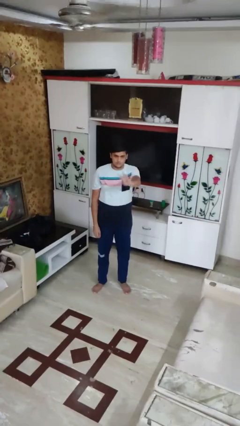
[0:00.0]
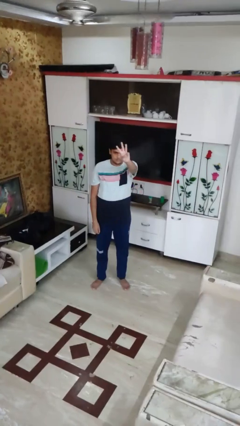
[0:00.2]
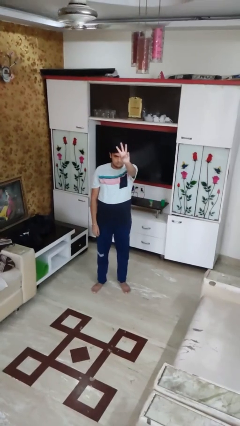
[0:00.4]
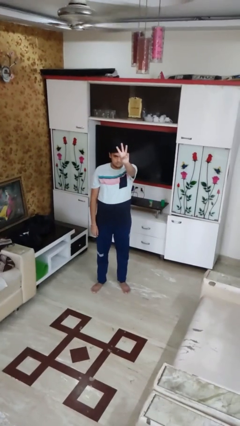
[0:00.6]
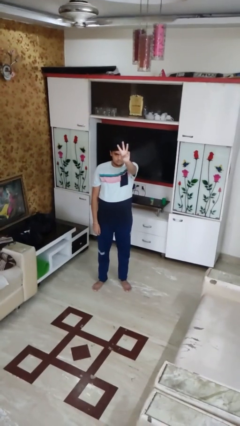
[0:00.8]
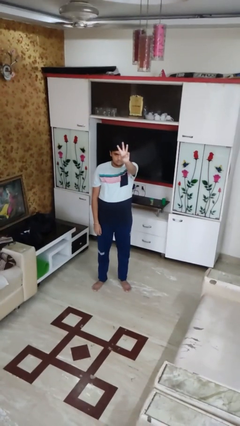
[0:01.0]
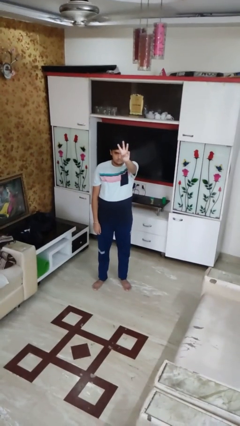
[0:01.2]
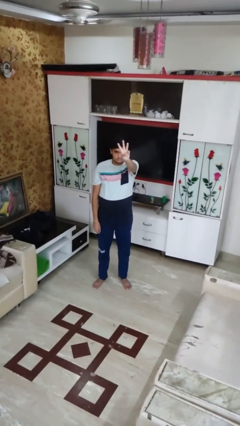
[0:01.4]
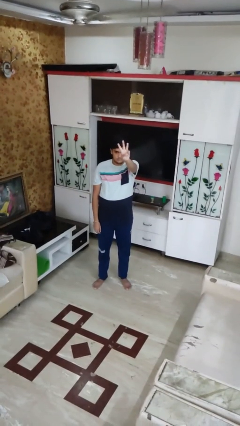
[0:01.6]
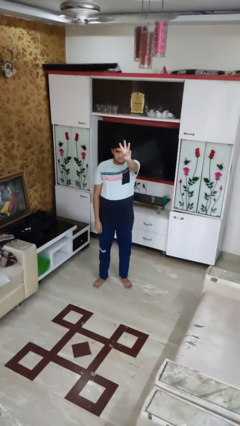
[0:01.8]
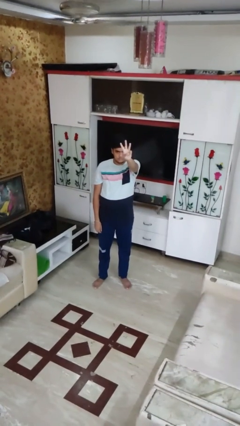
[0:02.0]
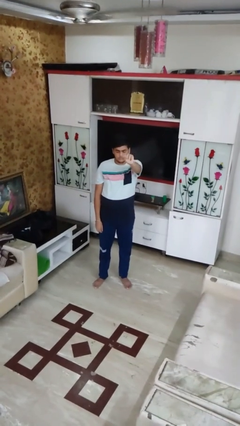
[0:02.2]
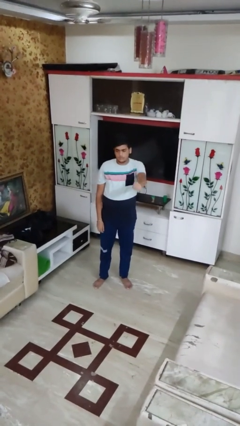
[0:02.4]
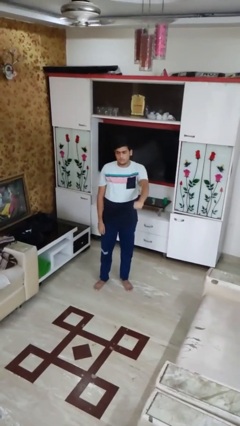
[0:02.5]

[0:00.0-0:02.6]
person gestures number three

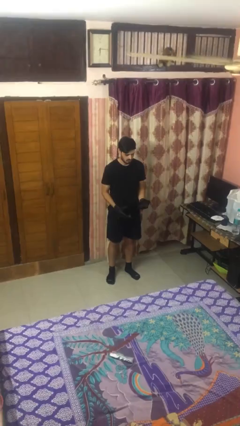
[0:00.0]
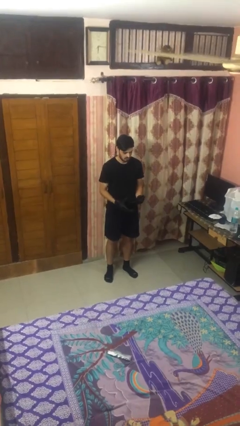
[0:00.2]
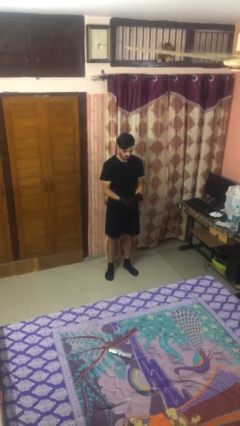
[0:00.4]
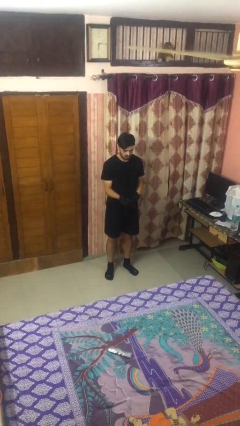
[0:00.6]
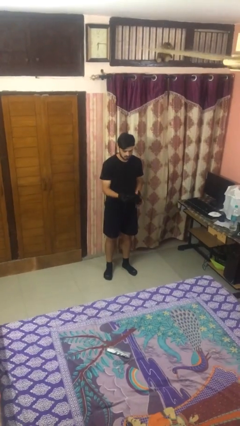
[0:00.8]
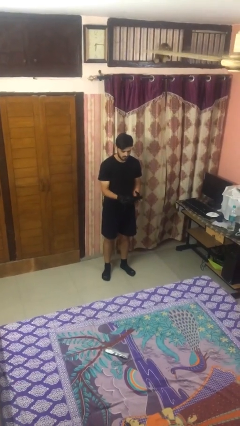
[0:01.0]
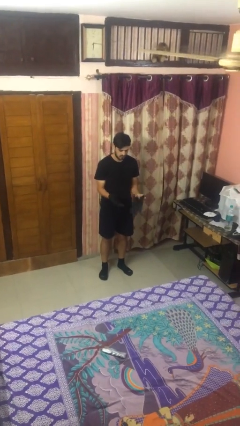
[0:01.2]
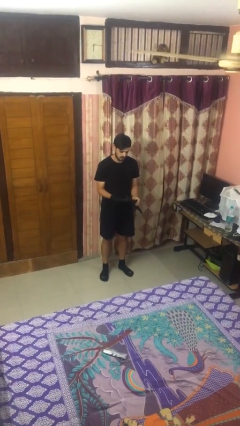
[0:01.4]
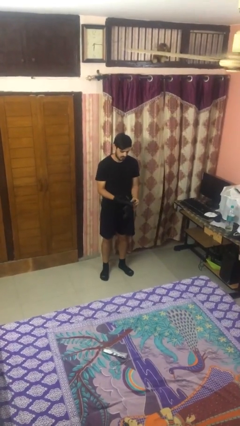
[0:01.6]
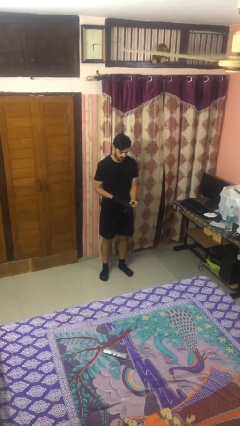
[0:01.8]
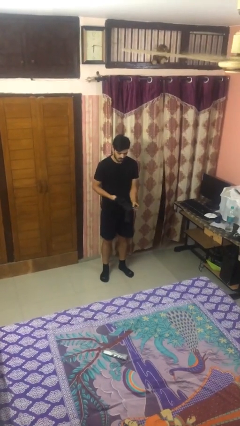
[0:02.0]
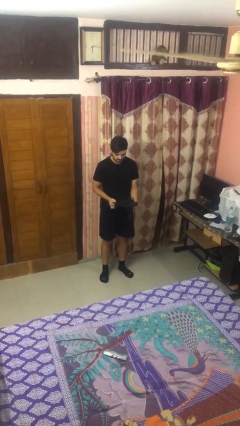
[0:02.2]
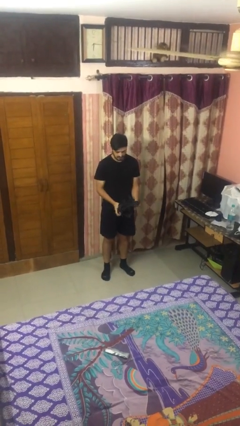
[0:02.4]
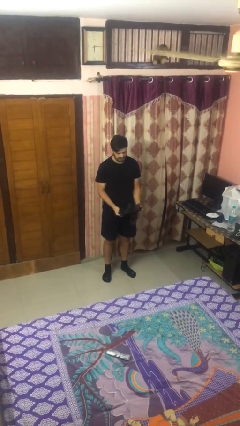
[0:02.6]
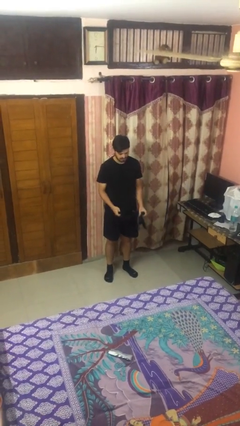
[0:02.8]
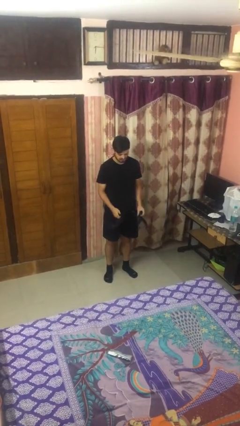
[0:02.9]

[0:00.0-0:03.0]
person takes off gloves

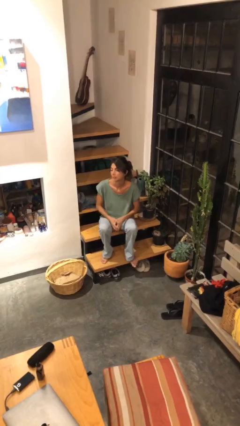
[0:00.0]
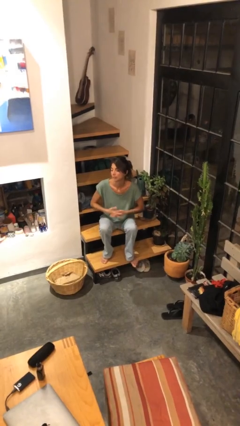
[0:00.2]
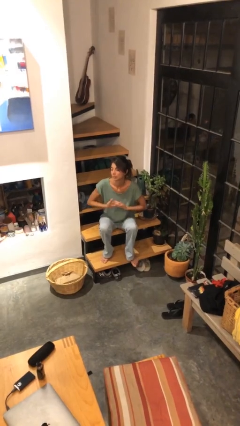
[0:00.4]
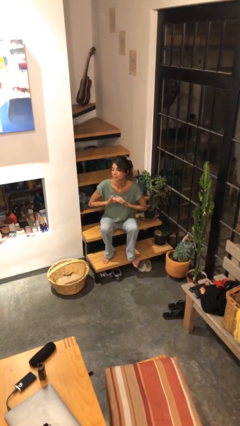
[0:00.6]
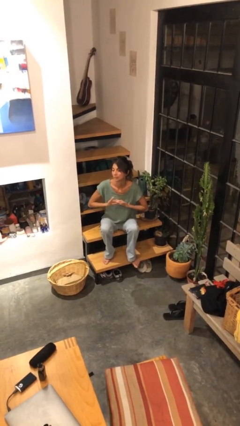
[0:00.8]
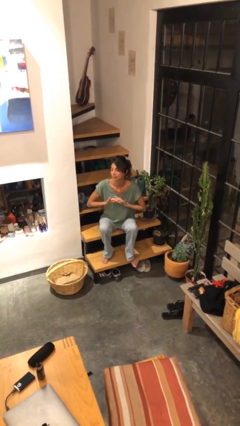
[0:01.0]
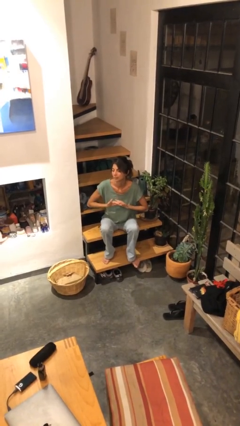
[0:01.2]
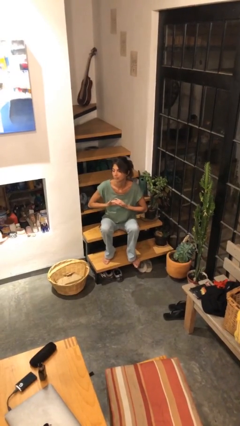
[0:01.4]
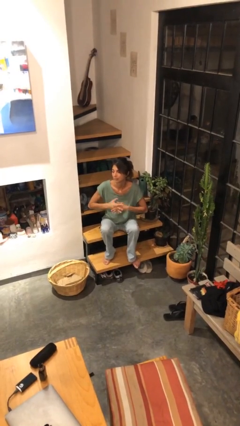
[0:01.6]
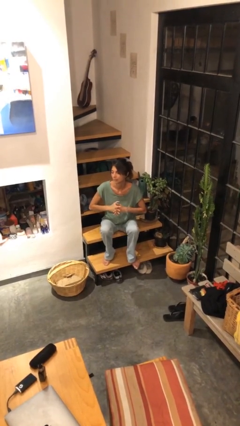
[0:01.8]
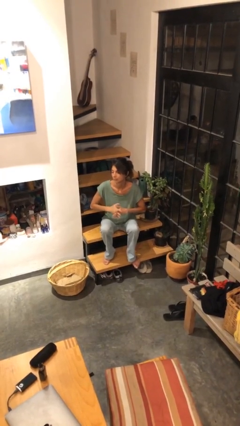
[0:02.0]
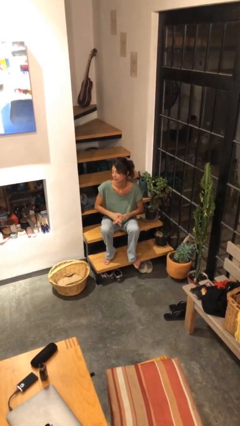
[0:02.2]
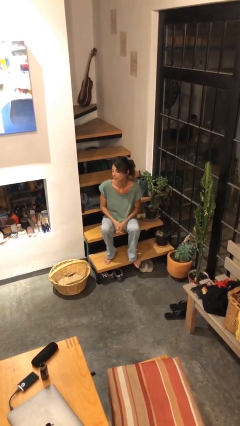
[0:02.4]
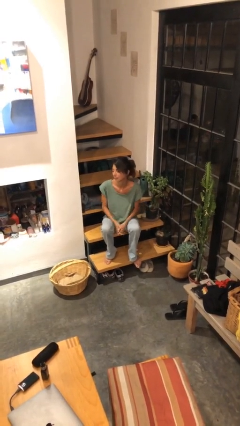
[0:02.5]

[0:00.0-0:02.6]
person cracks knuckles

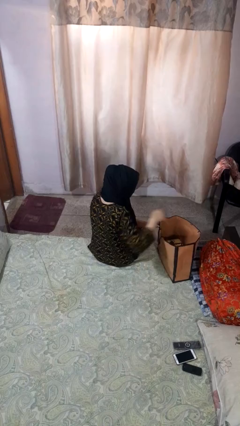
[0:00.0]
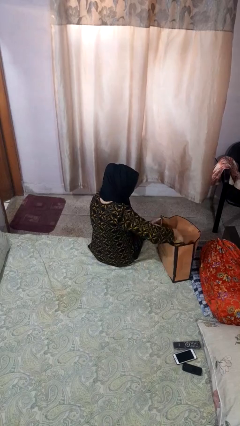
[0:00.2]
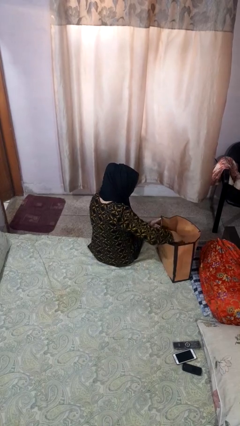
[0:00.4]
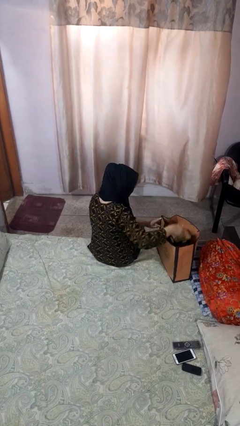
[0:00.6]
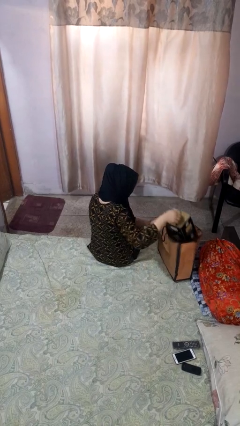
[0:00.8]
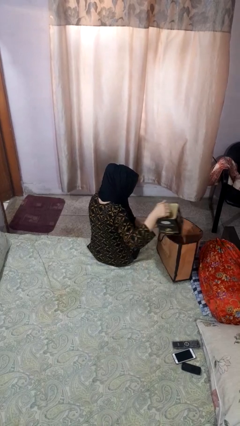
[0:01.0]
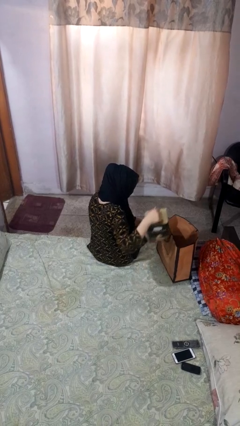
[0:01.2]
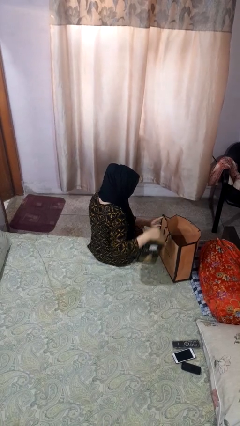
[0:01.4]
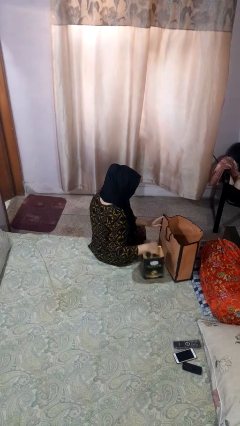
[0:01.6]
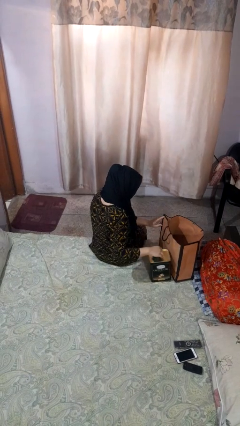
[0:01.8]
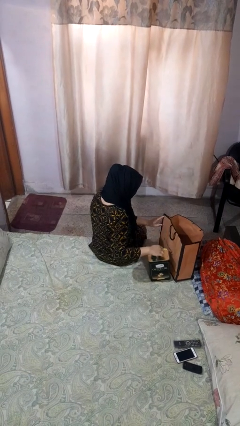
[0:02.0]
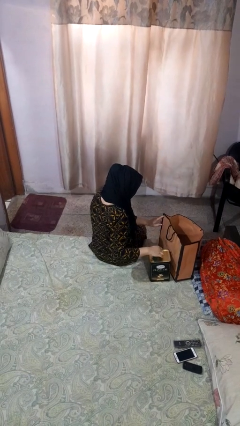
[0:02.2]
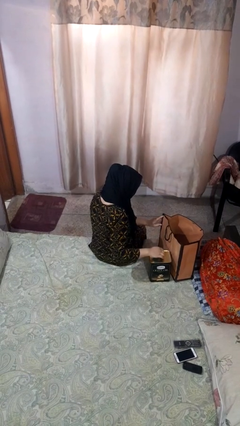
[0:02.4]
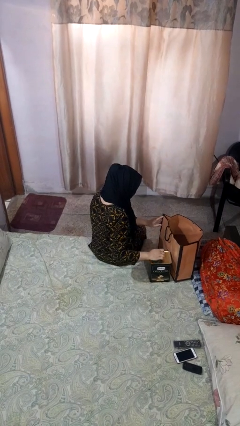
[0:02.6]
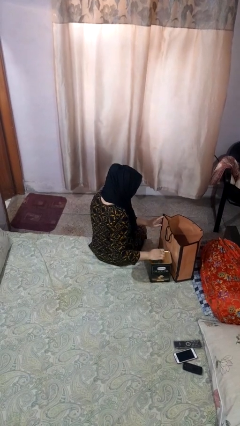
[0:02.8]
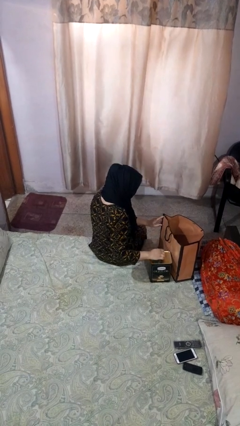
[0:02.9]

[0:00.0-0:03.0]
person takes object from bag

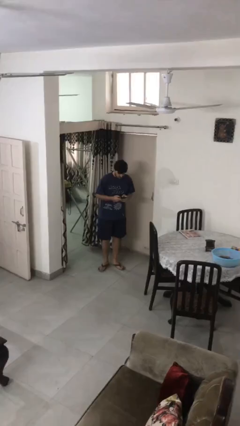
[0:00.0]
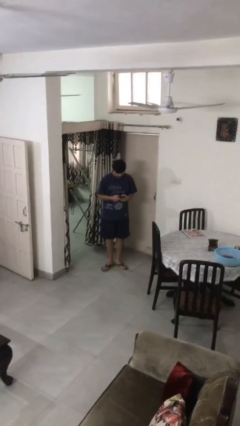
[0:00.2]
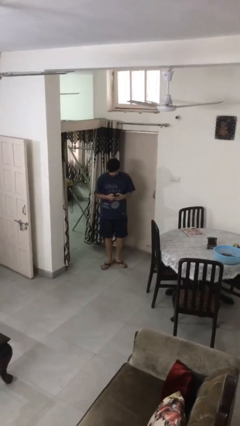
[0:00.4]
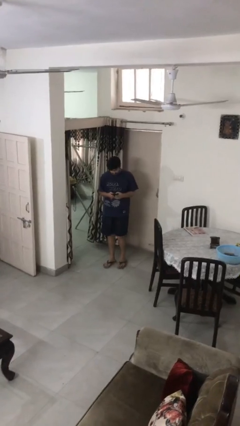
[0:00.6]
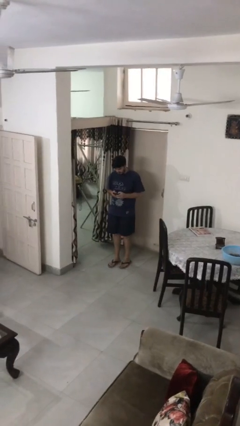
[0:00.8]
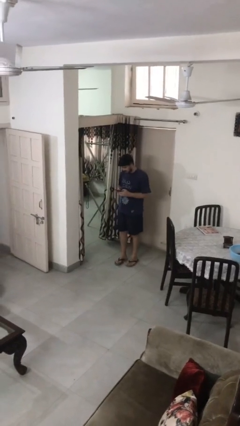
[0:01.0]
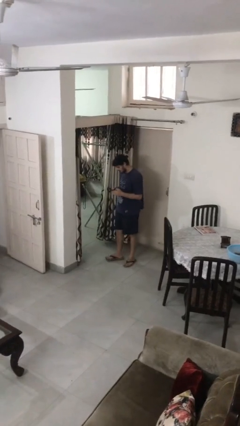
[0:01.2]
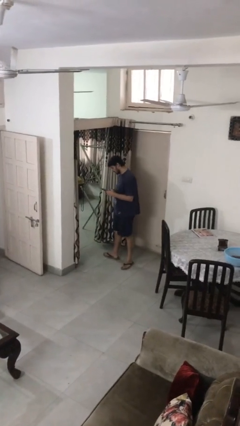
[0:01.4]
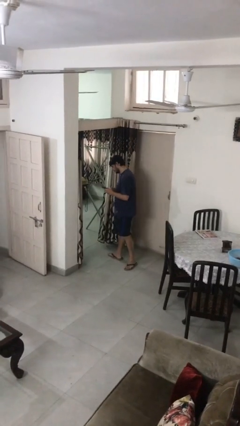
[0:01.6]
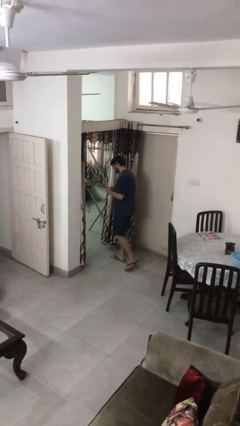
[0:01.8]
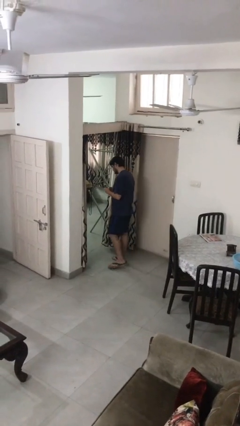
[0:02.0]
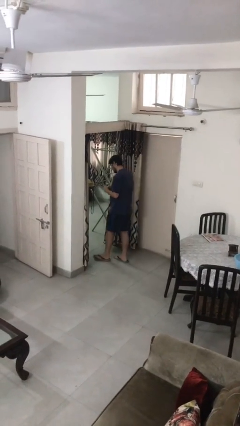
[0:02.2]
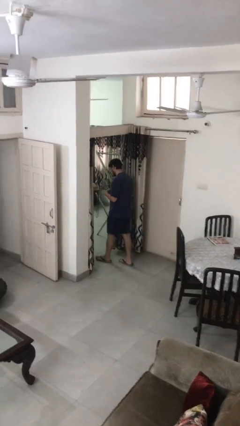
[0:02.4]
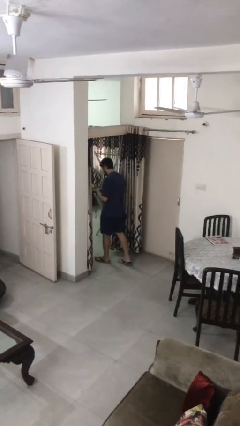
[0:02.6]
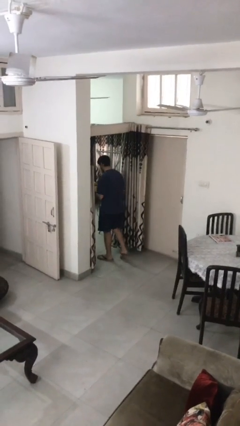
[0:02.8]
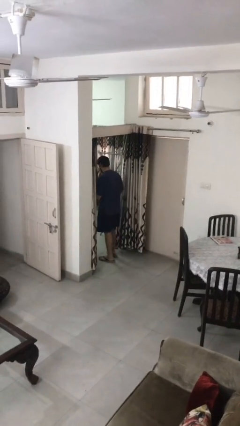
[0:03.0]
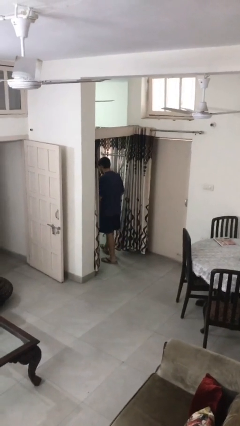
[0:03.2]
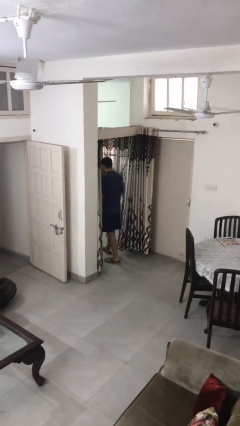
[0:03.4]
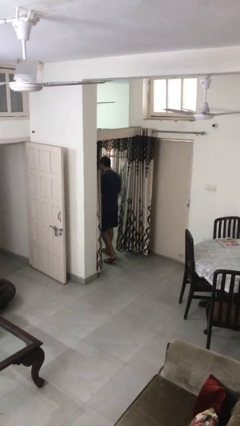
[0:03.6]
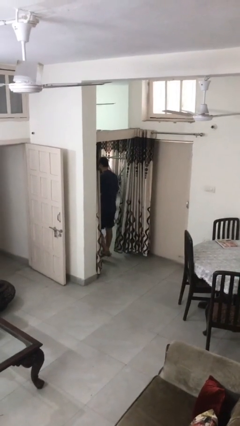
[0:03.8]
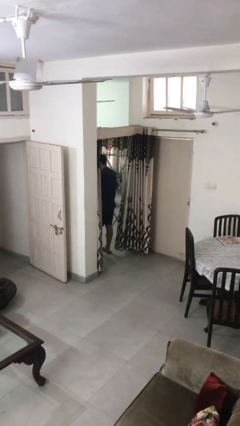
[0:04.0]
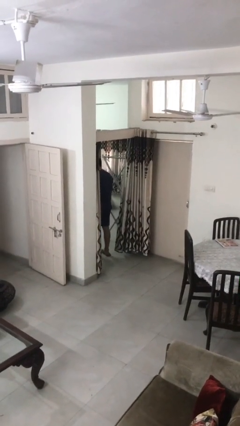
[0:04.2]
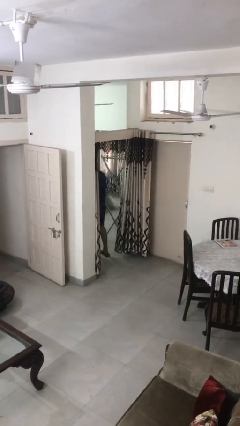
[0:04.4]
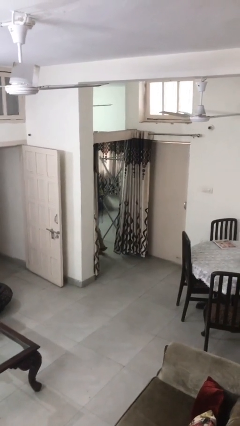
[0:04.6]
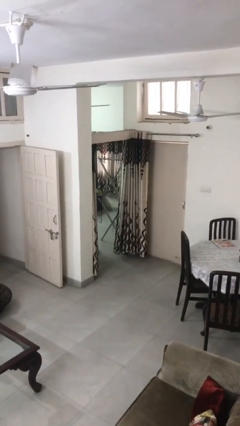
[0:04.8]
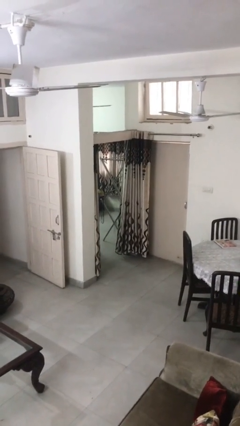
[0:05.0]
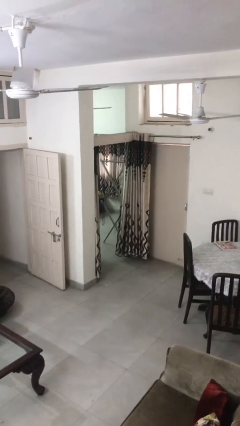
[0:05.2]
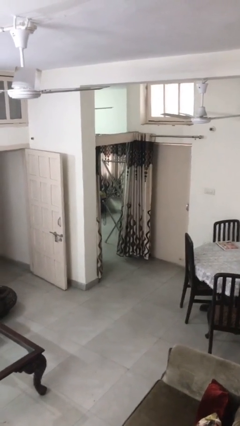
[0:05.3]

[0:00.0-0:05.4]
person exits scene through structure

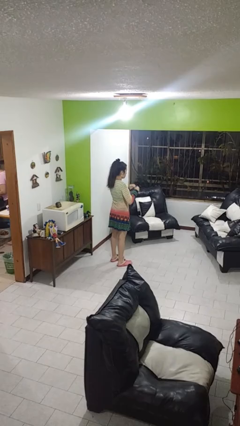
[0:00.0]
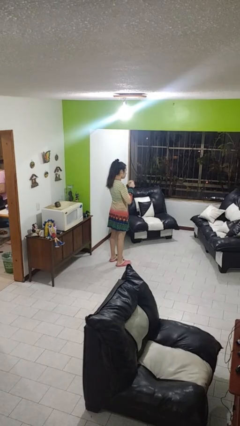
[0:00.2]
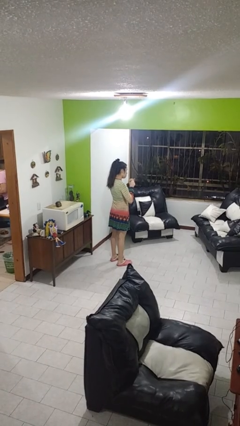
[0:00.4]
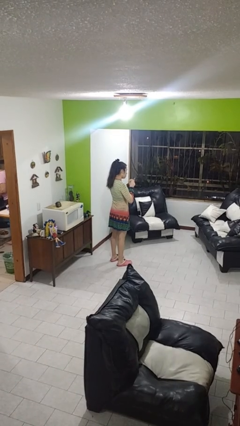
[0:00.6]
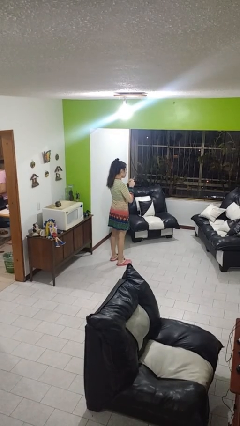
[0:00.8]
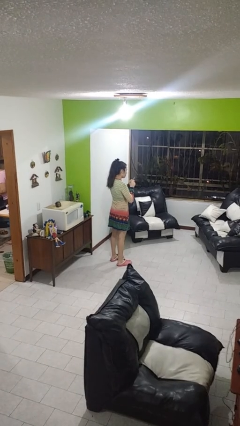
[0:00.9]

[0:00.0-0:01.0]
person files fingernails
